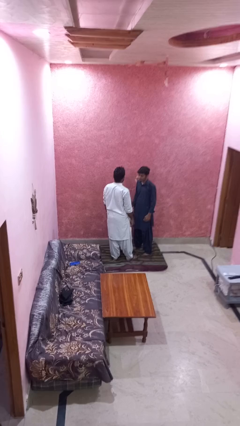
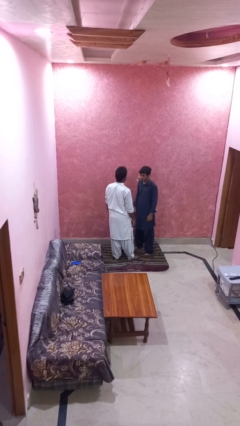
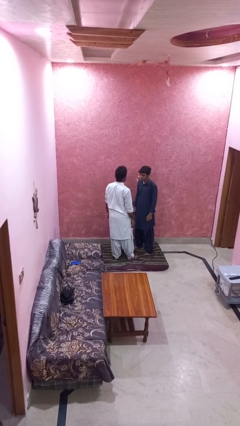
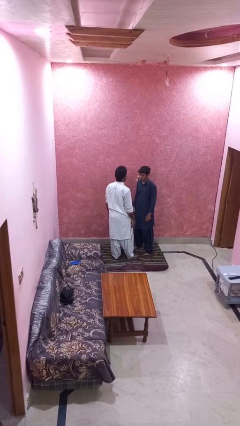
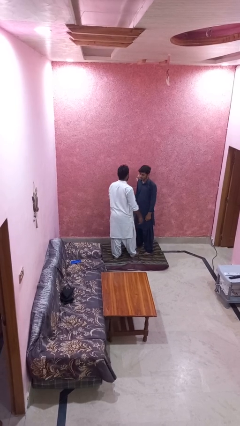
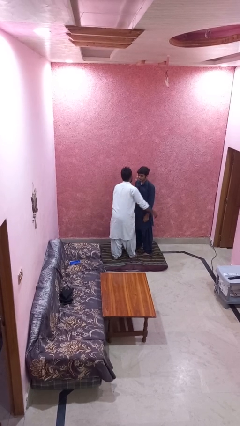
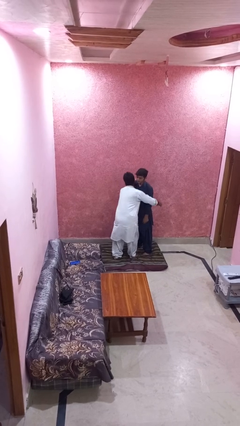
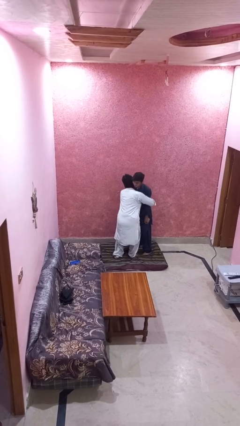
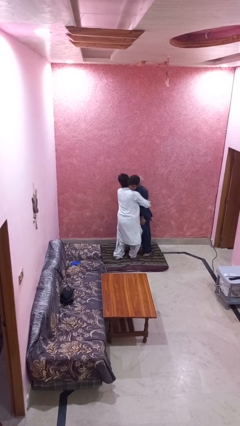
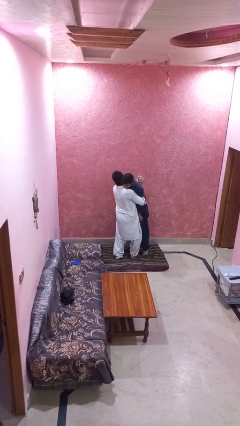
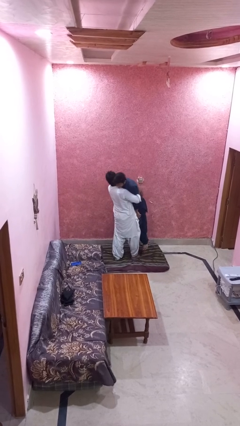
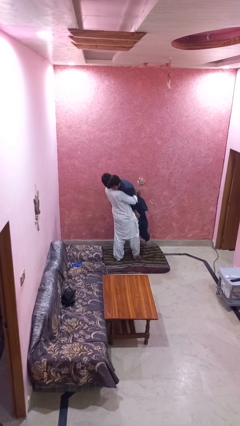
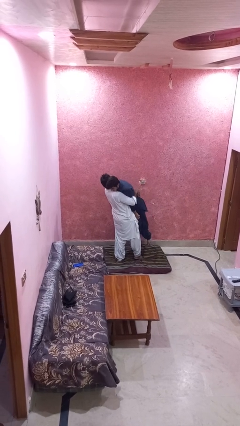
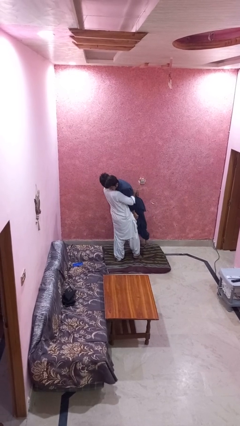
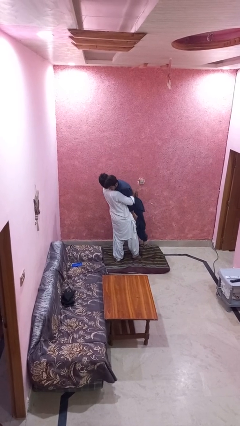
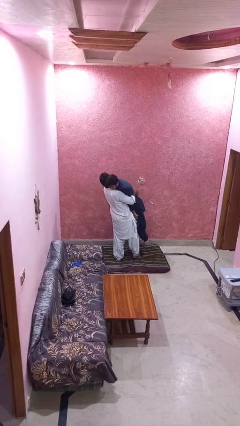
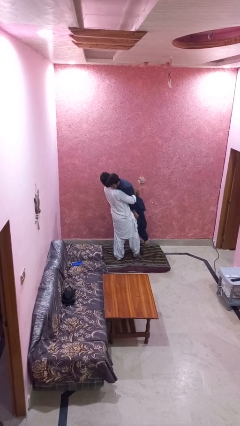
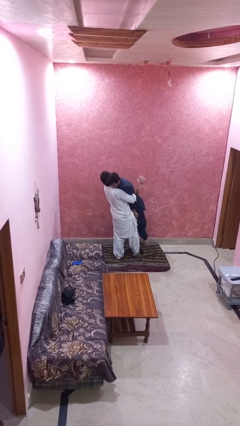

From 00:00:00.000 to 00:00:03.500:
person picks up person

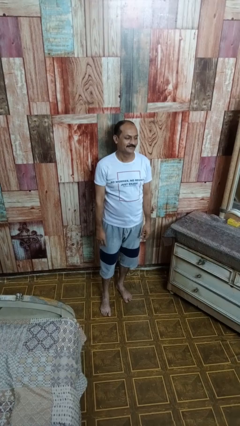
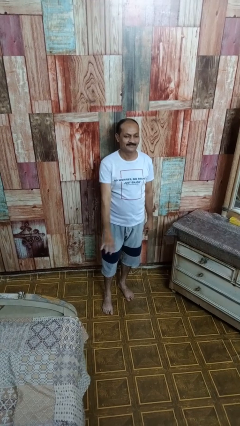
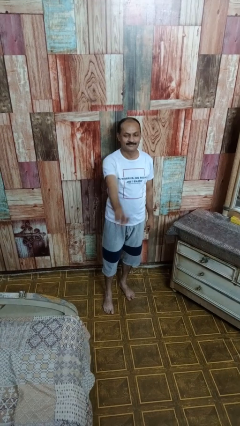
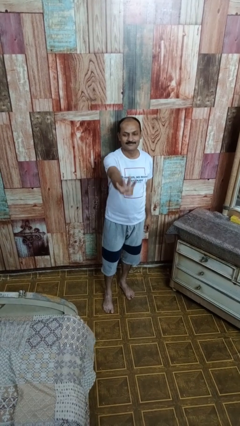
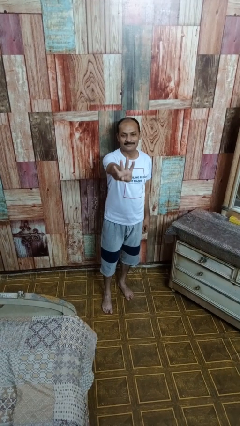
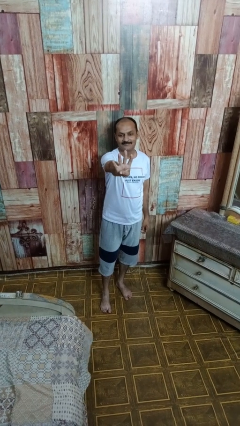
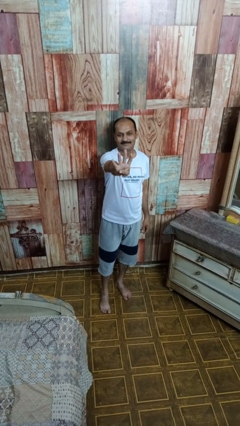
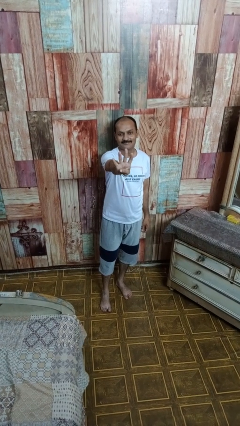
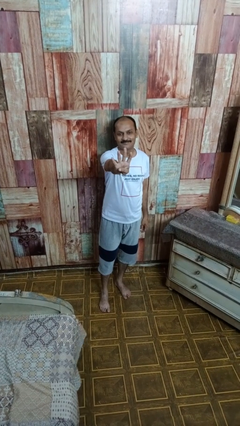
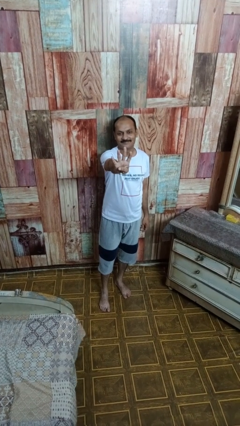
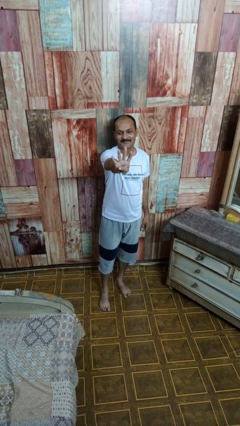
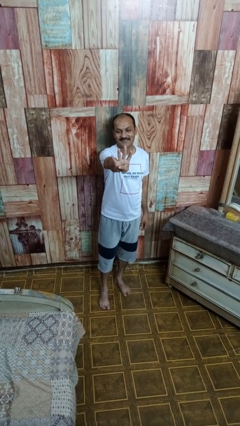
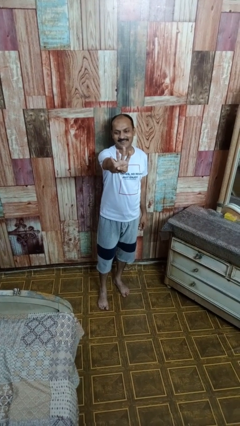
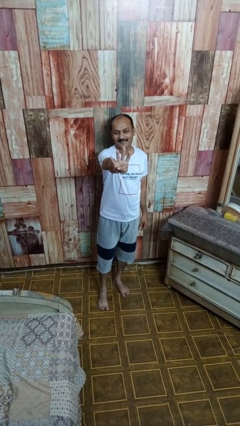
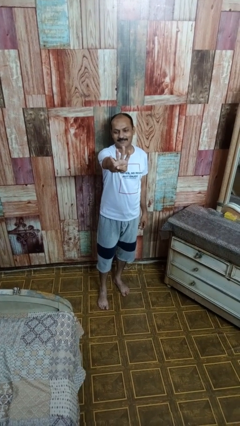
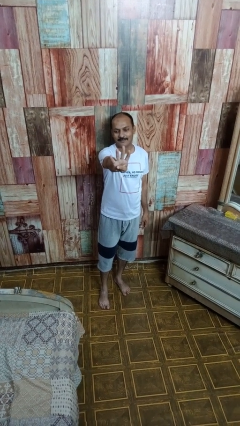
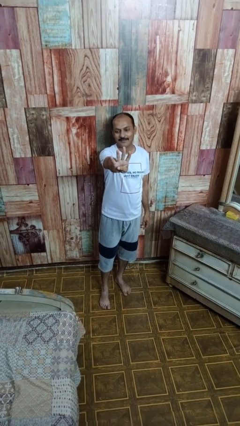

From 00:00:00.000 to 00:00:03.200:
person gestures number four

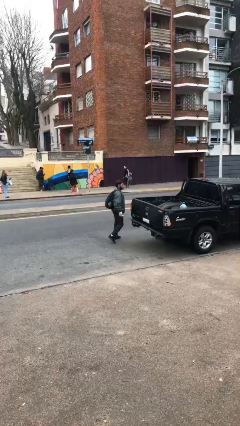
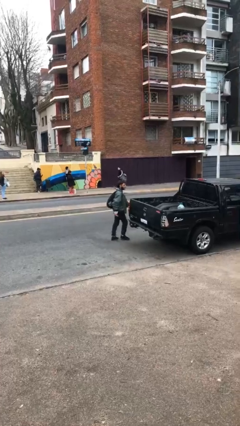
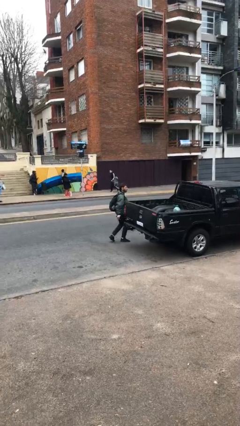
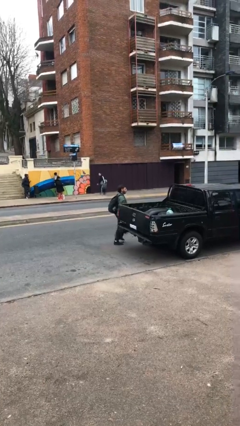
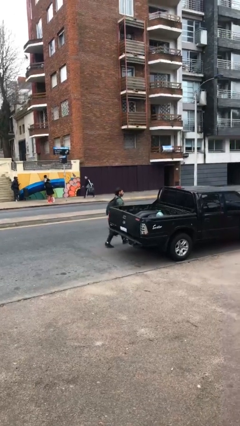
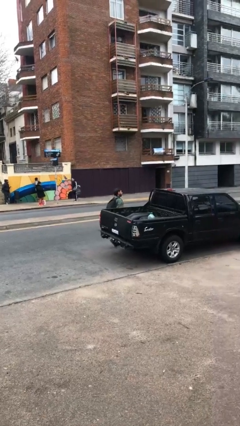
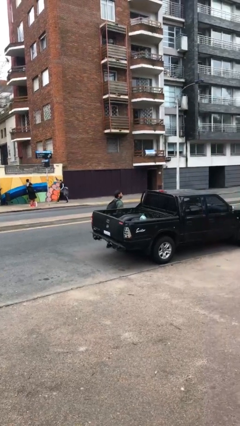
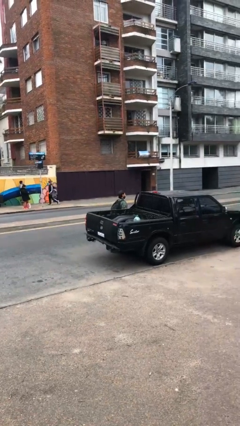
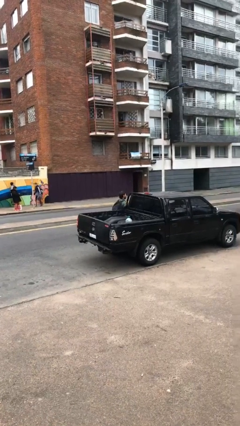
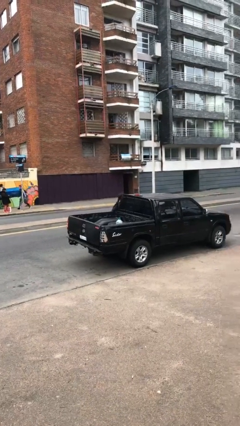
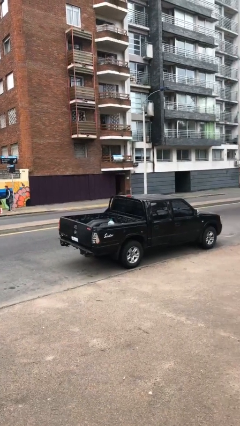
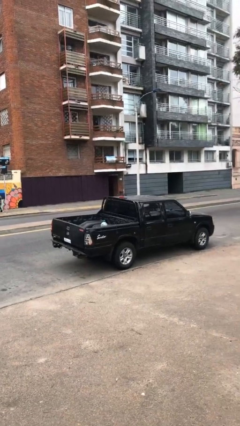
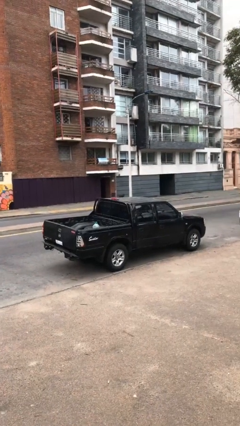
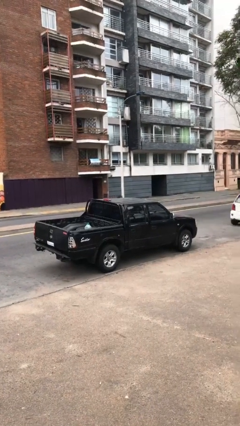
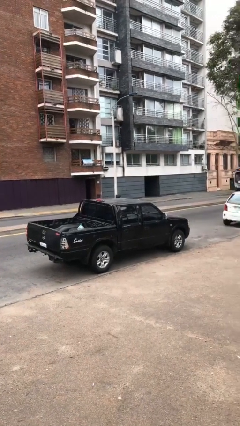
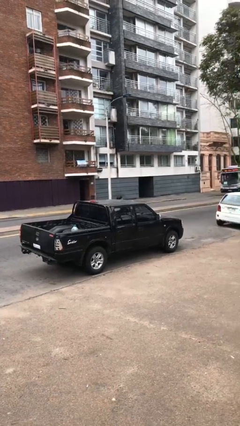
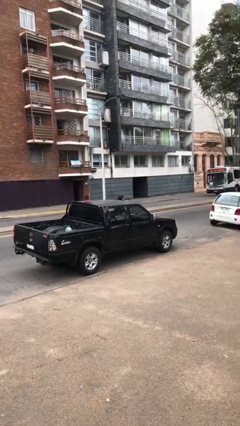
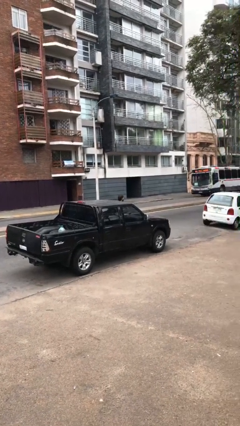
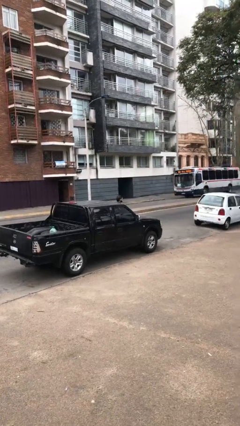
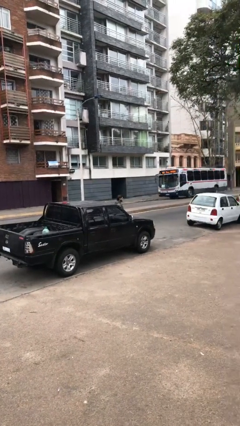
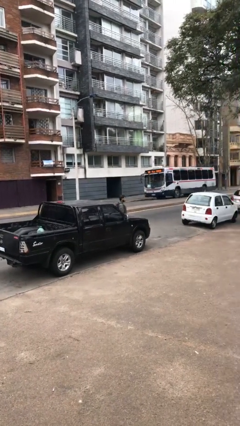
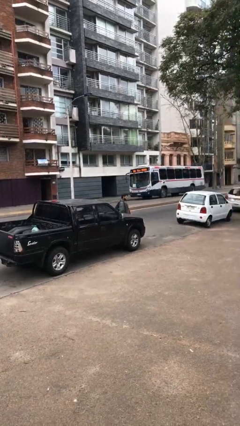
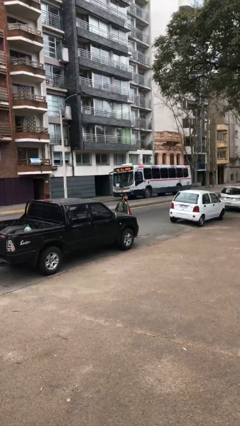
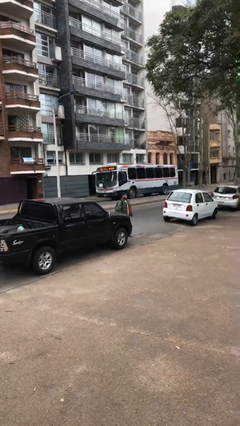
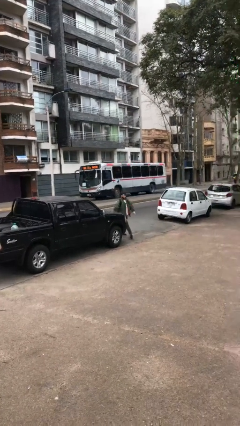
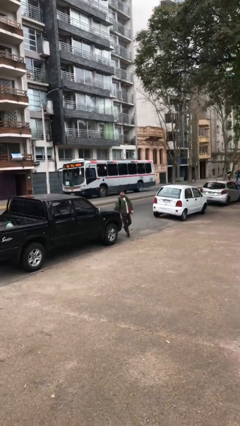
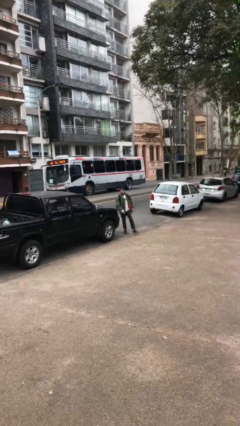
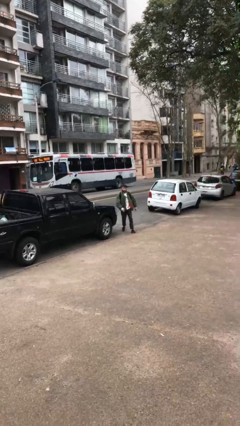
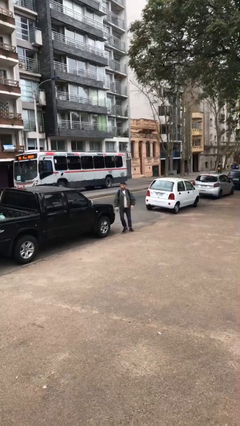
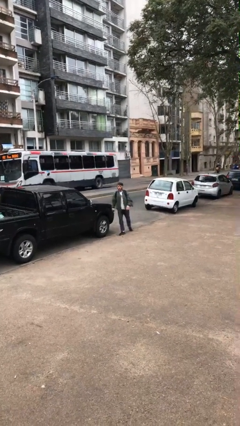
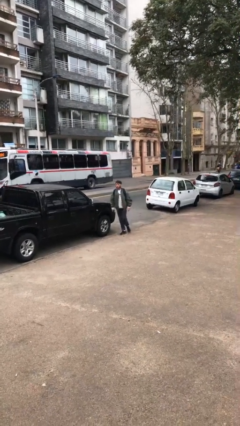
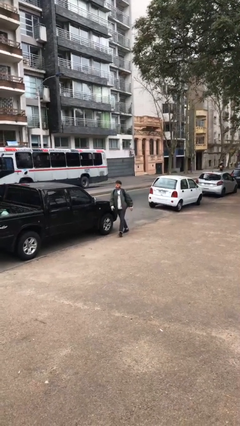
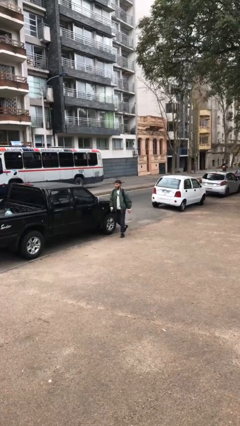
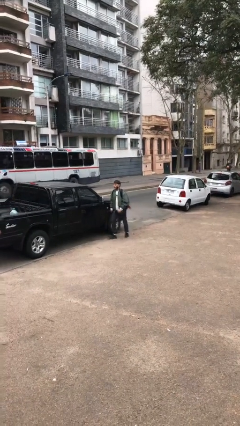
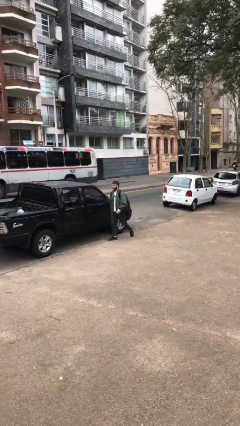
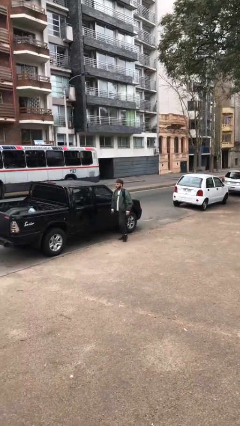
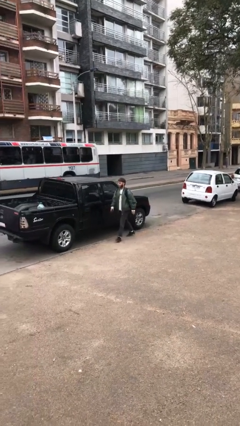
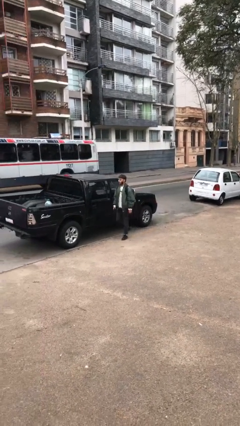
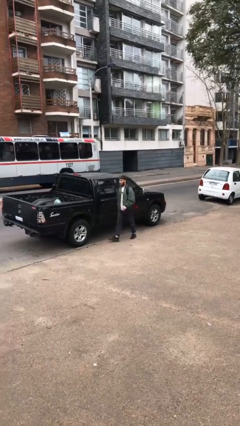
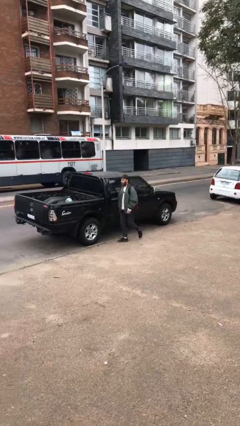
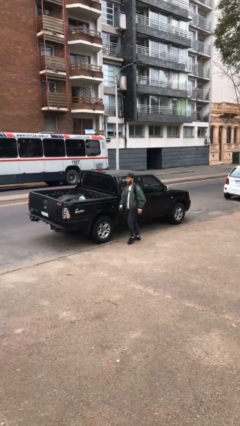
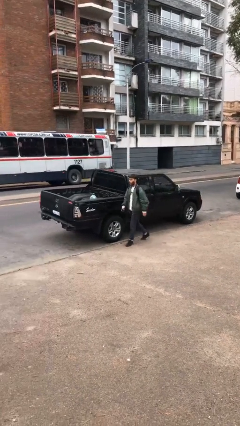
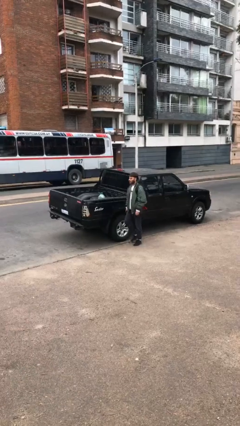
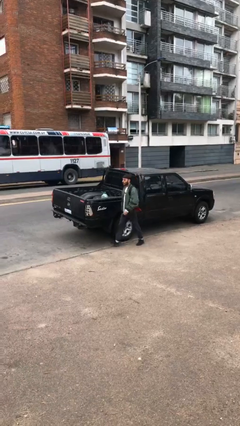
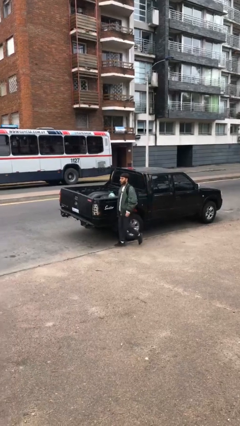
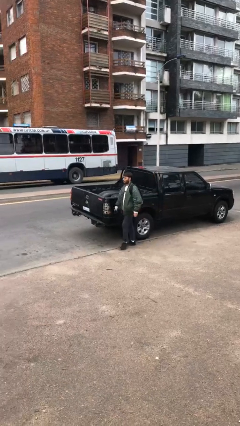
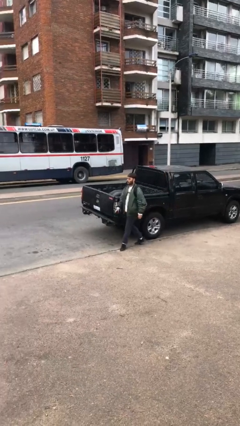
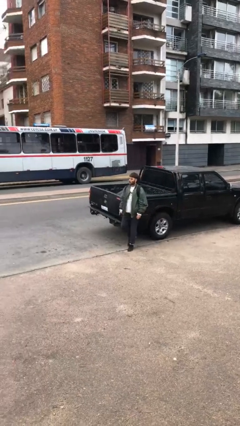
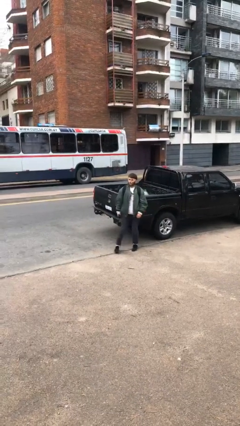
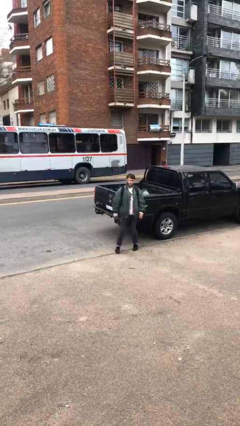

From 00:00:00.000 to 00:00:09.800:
person walks around car

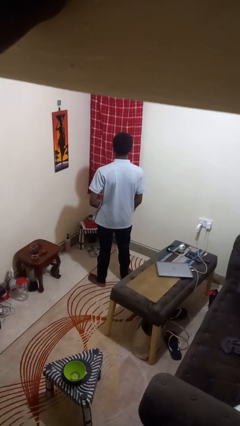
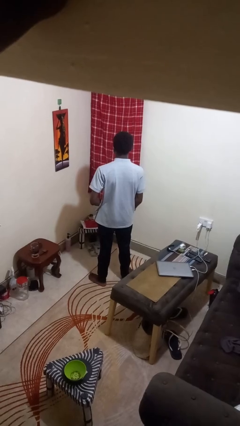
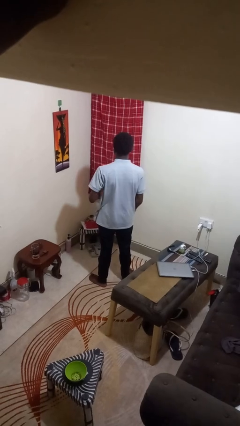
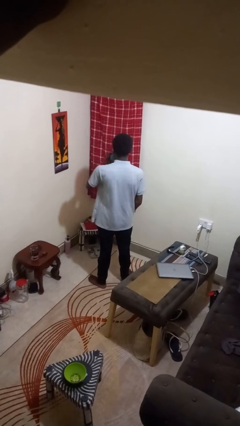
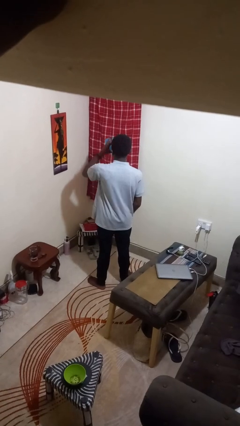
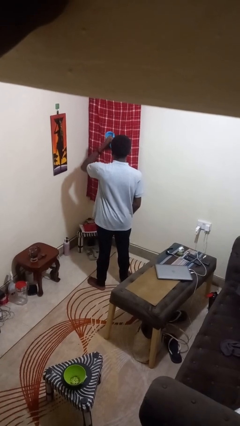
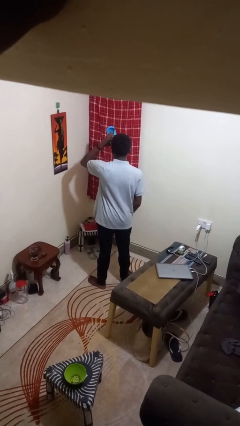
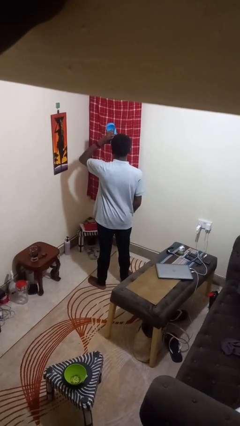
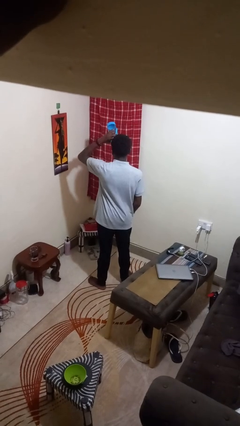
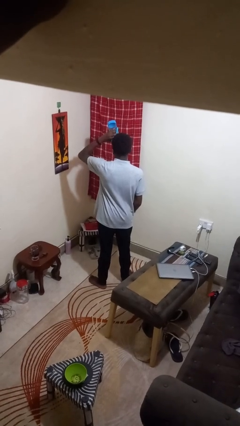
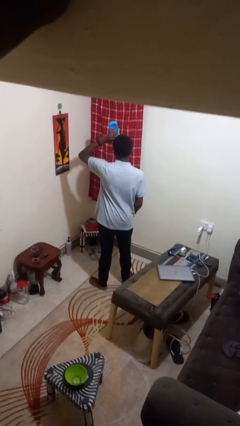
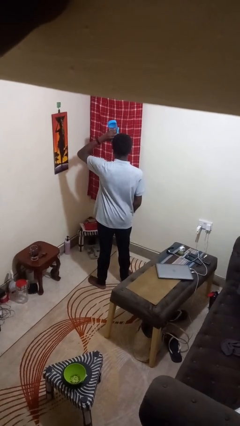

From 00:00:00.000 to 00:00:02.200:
person drinks from bottle
